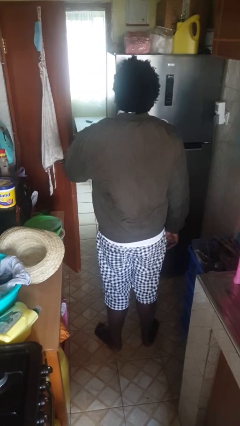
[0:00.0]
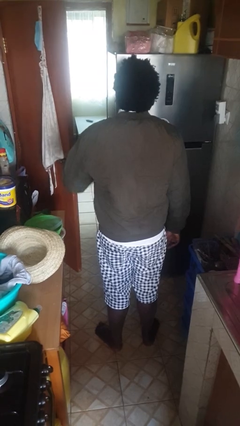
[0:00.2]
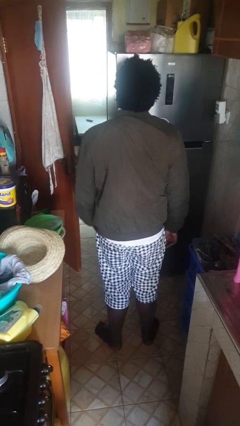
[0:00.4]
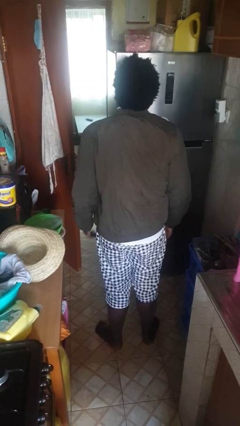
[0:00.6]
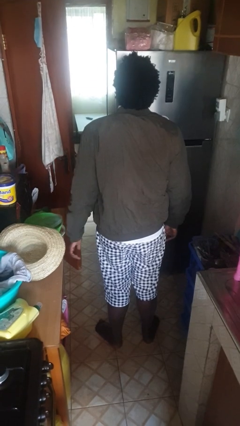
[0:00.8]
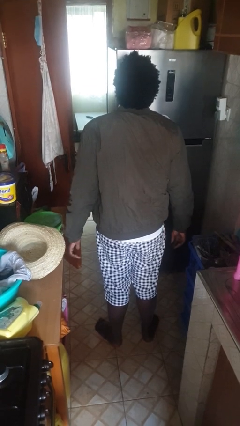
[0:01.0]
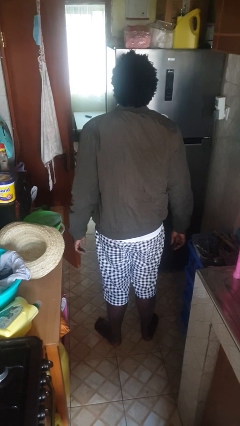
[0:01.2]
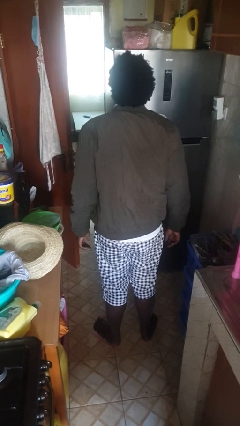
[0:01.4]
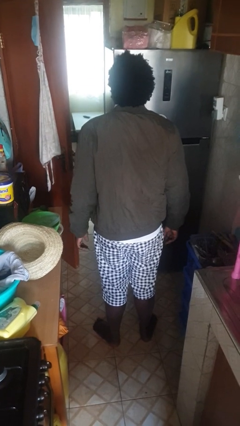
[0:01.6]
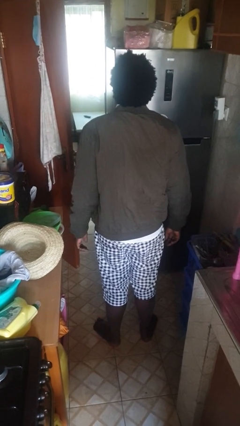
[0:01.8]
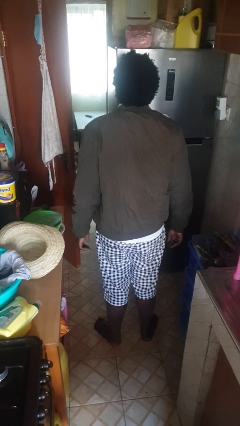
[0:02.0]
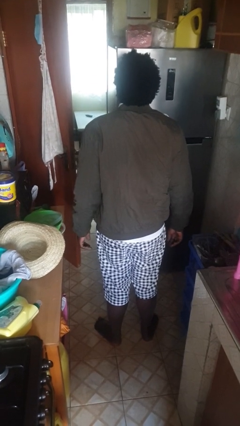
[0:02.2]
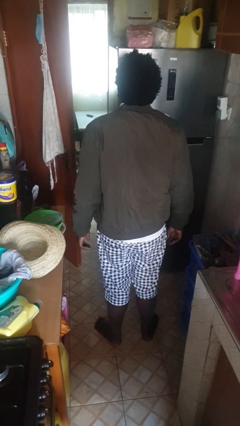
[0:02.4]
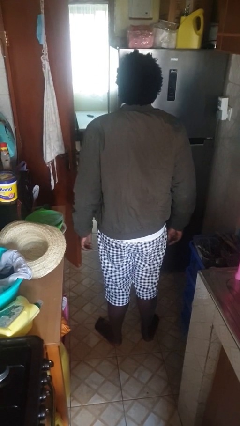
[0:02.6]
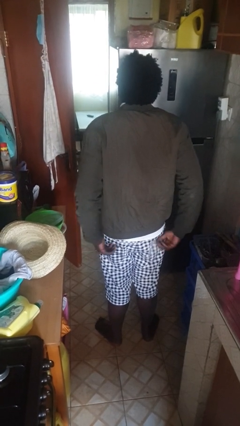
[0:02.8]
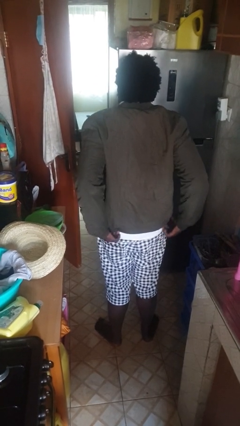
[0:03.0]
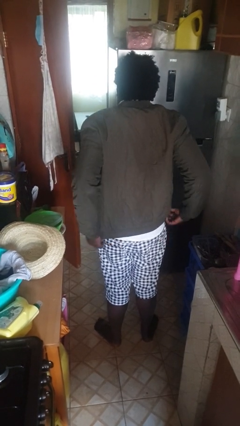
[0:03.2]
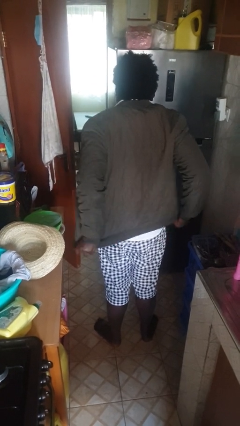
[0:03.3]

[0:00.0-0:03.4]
person unzips jacket

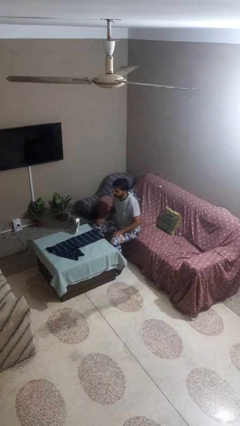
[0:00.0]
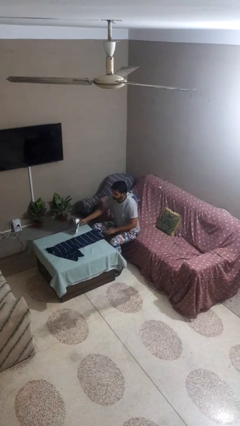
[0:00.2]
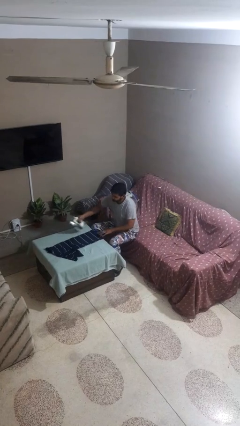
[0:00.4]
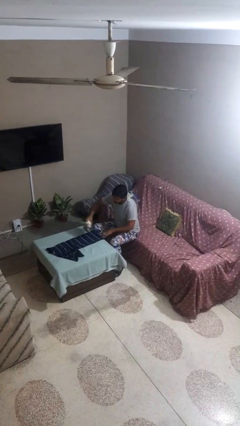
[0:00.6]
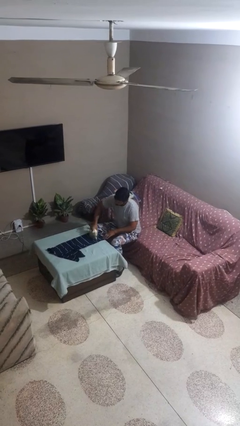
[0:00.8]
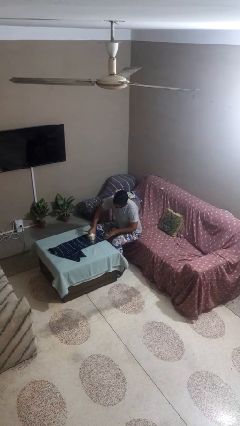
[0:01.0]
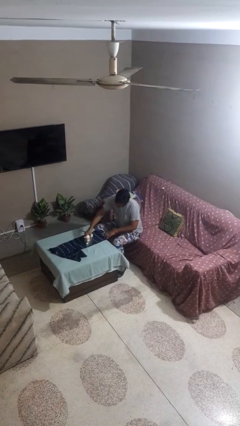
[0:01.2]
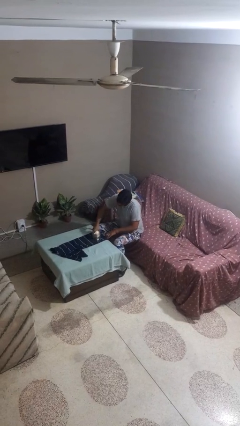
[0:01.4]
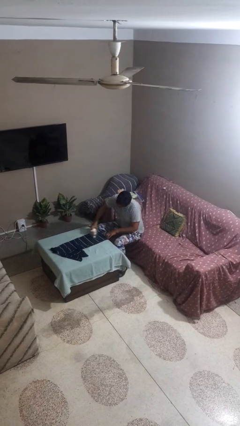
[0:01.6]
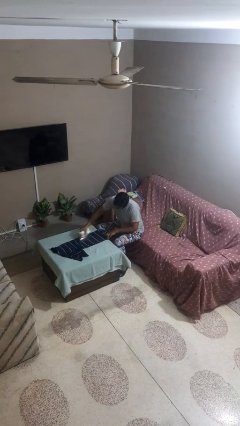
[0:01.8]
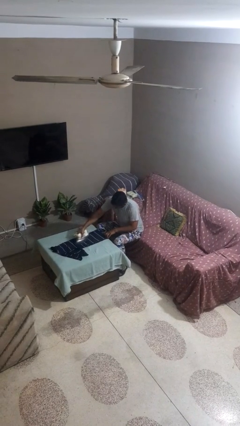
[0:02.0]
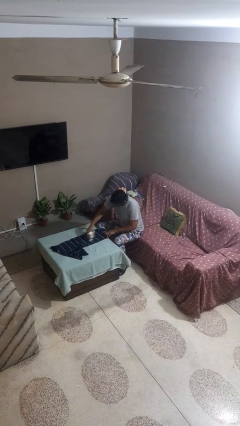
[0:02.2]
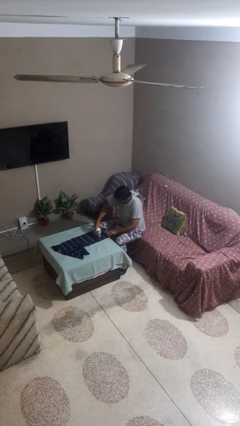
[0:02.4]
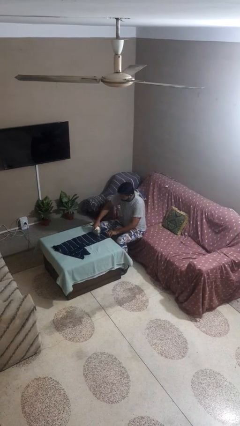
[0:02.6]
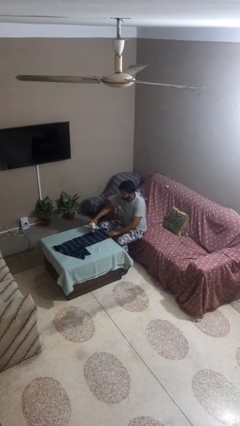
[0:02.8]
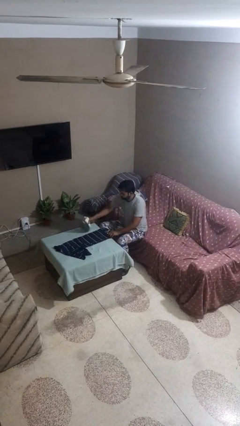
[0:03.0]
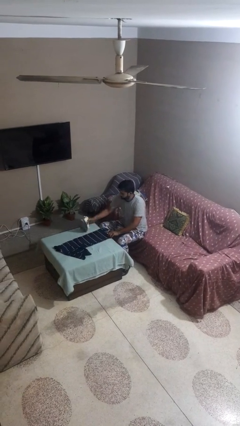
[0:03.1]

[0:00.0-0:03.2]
person irons clothes

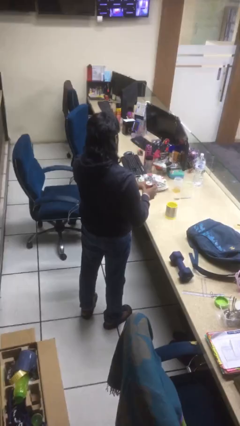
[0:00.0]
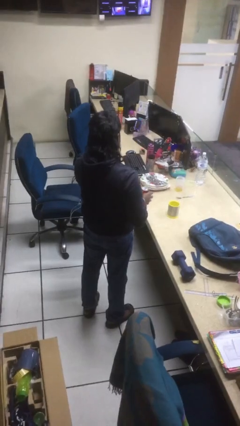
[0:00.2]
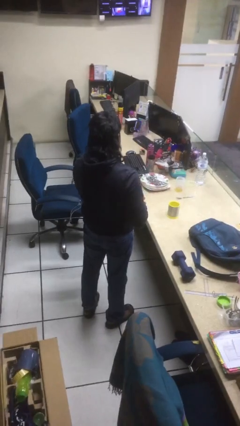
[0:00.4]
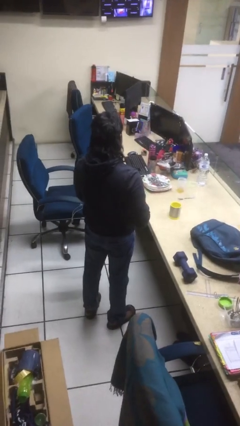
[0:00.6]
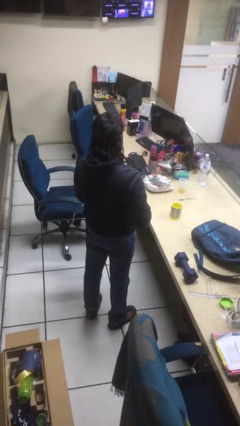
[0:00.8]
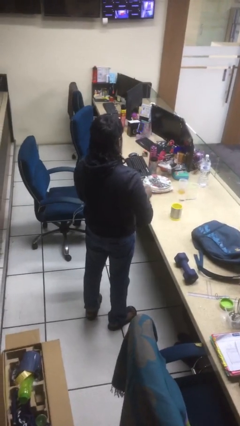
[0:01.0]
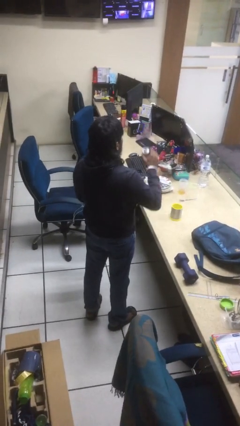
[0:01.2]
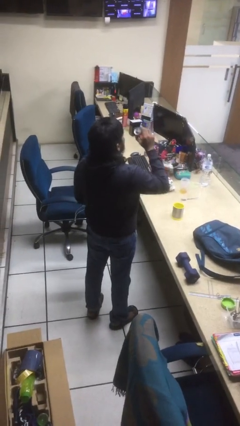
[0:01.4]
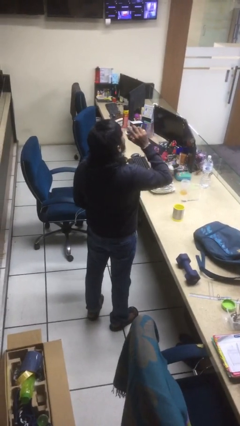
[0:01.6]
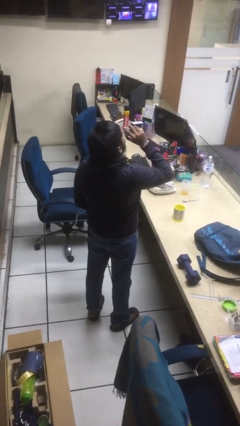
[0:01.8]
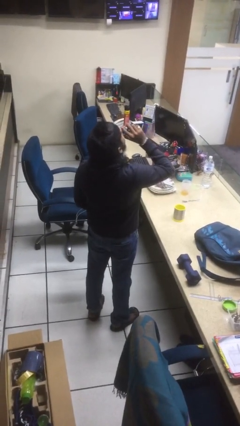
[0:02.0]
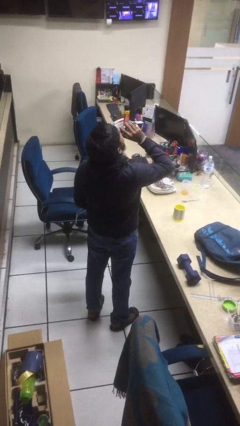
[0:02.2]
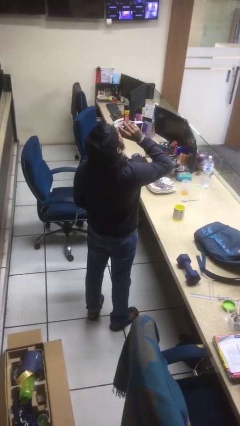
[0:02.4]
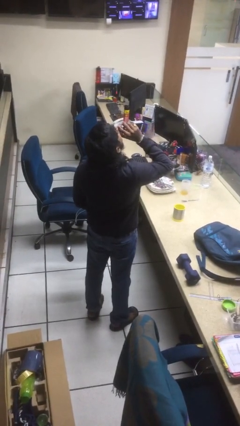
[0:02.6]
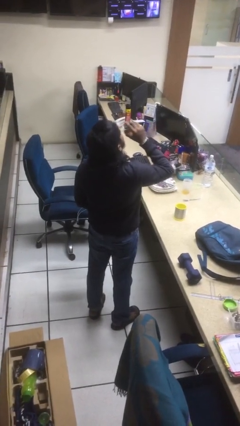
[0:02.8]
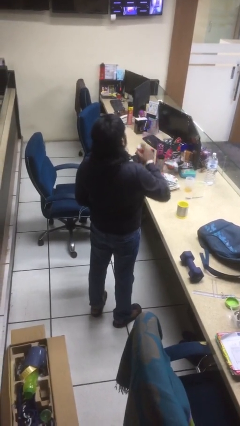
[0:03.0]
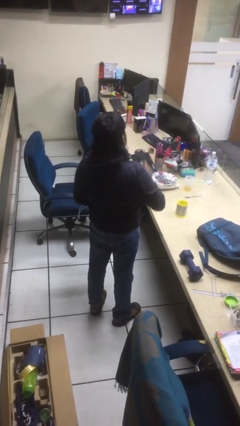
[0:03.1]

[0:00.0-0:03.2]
person drinks from beverage can

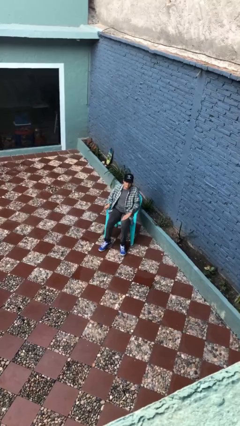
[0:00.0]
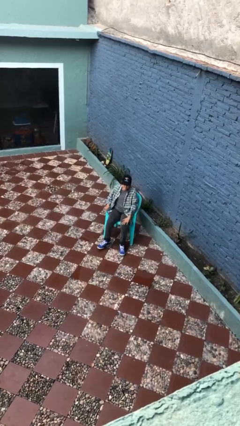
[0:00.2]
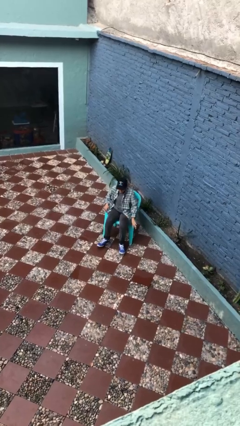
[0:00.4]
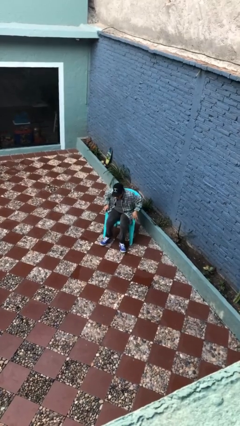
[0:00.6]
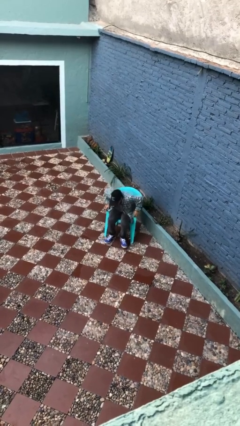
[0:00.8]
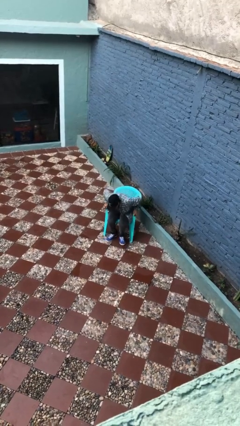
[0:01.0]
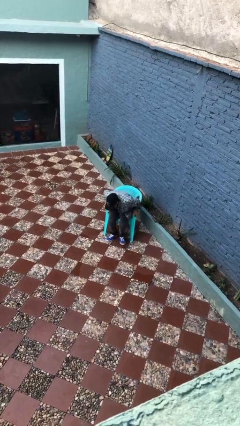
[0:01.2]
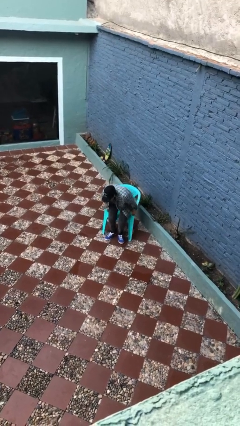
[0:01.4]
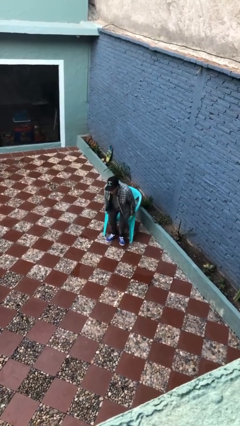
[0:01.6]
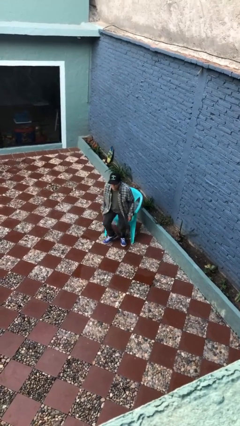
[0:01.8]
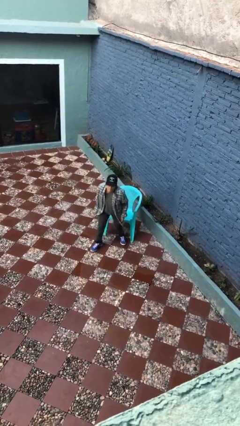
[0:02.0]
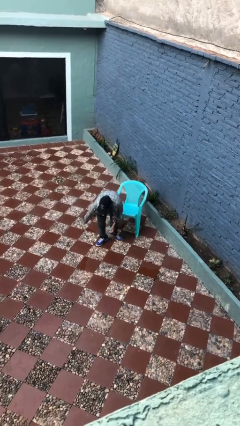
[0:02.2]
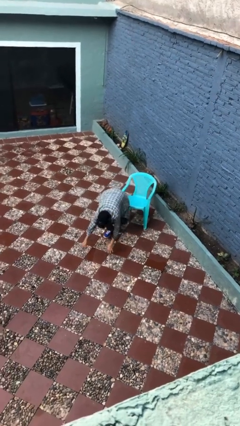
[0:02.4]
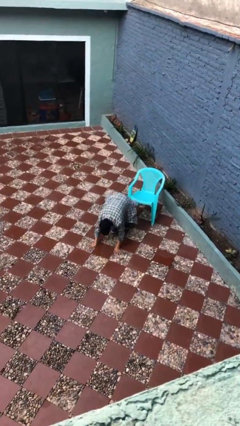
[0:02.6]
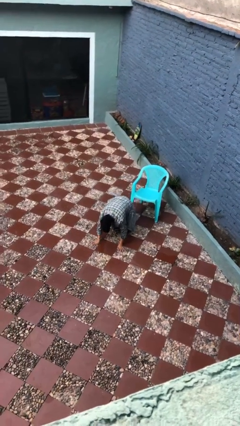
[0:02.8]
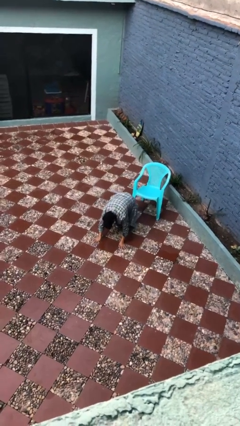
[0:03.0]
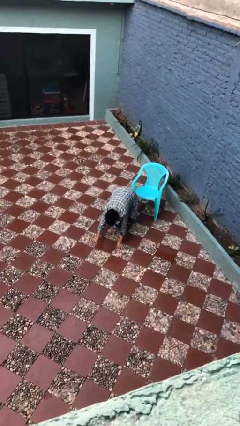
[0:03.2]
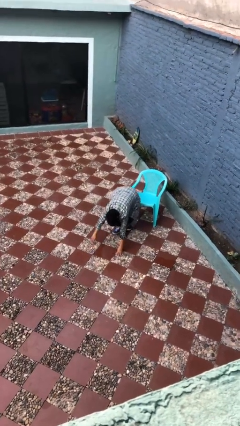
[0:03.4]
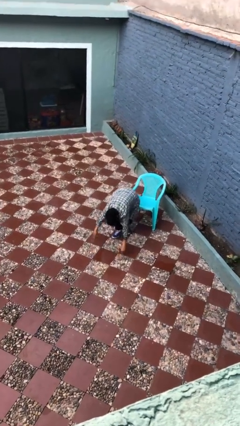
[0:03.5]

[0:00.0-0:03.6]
person falls from chair

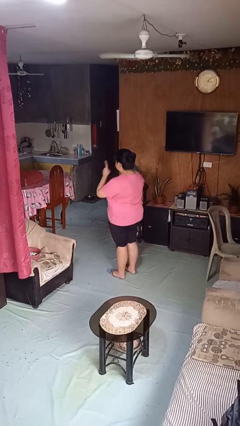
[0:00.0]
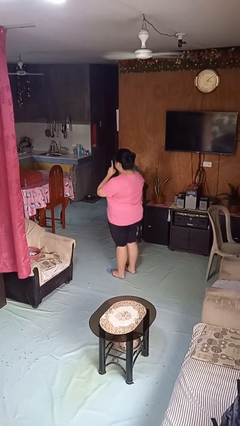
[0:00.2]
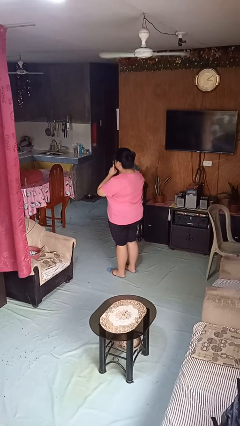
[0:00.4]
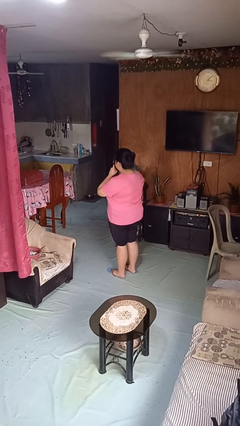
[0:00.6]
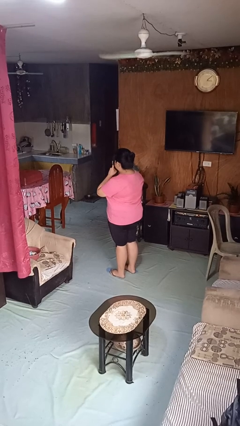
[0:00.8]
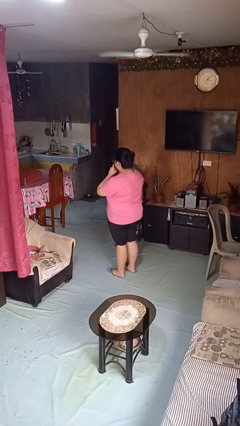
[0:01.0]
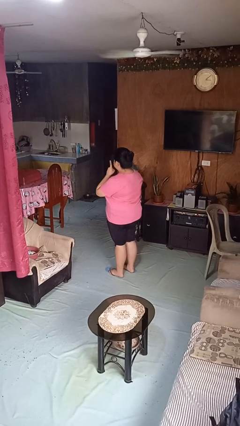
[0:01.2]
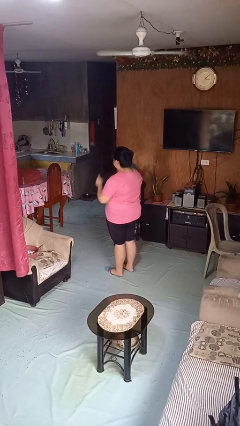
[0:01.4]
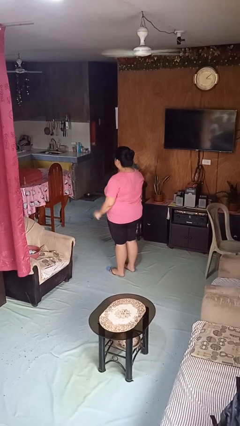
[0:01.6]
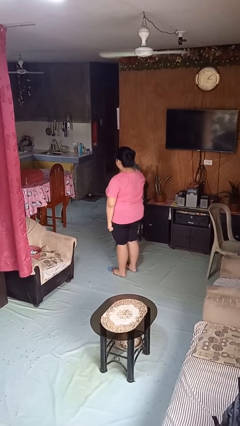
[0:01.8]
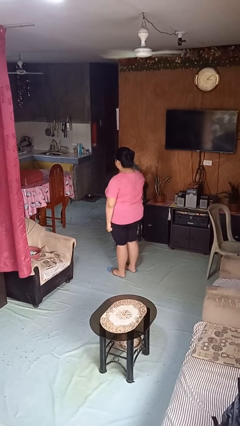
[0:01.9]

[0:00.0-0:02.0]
person gestures be quiet

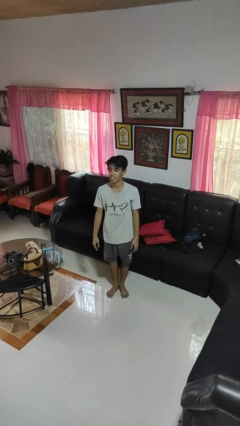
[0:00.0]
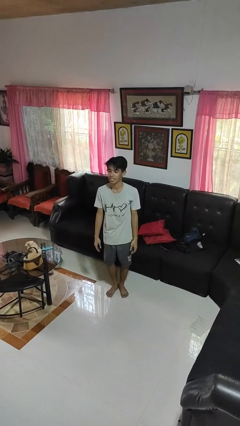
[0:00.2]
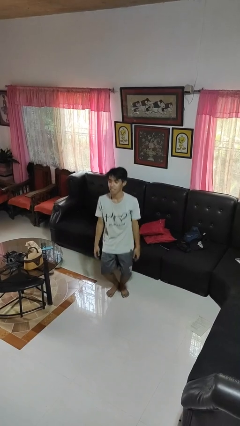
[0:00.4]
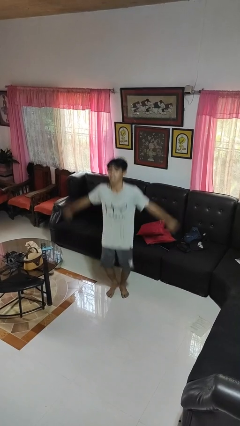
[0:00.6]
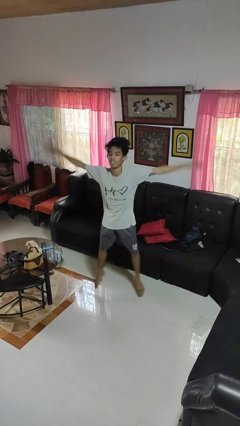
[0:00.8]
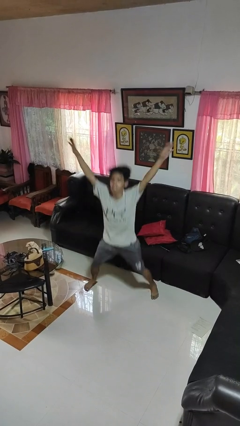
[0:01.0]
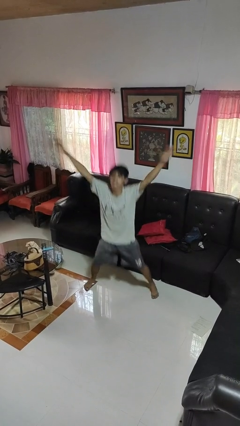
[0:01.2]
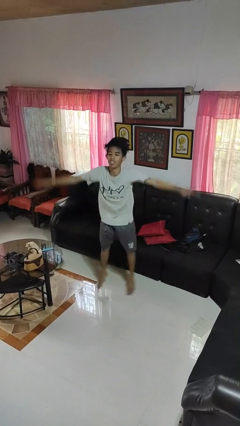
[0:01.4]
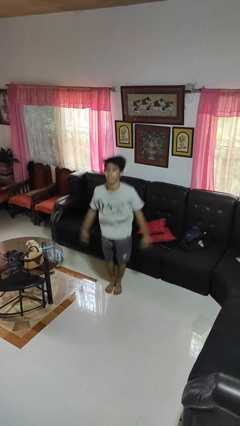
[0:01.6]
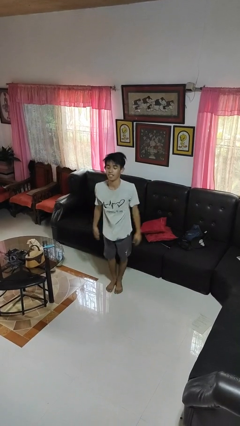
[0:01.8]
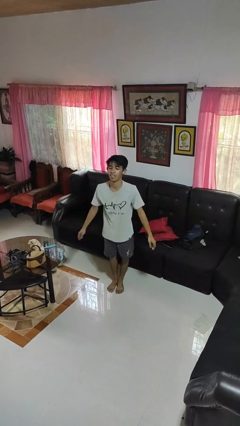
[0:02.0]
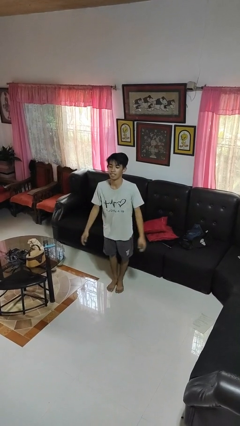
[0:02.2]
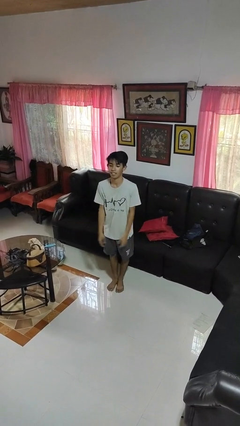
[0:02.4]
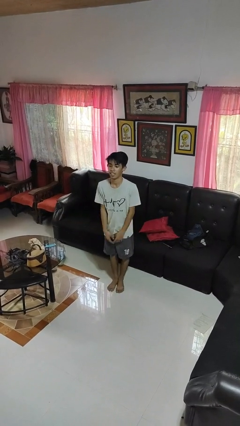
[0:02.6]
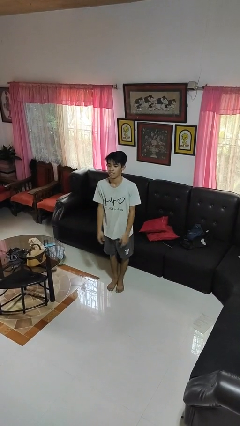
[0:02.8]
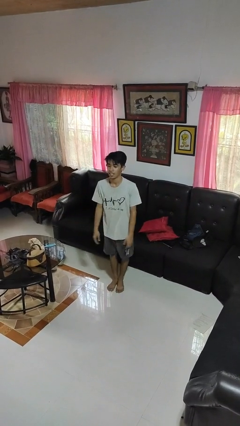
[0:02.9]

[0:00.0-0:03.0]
person exercises with jumping jacks
